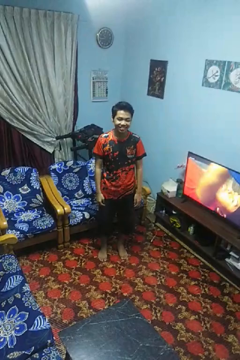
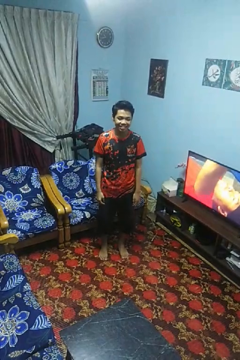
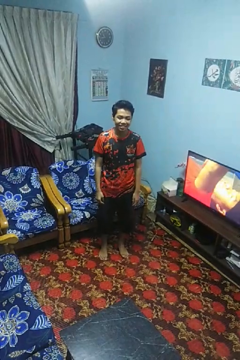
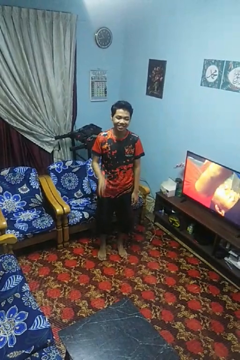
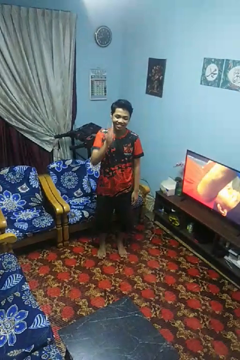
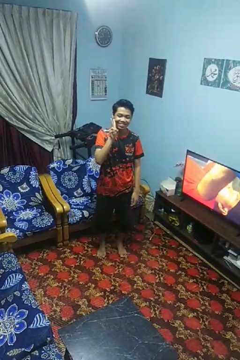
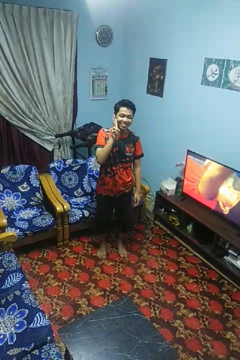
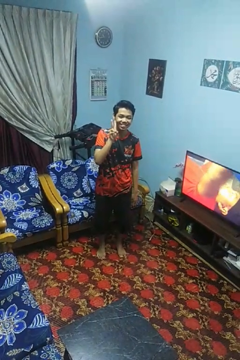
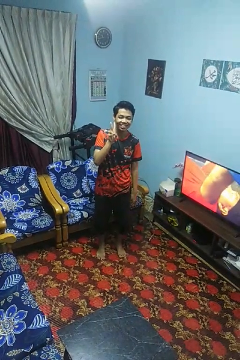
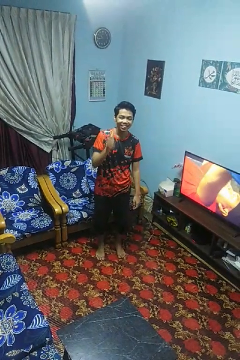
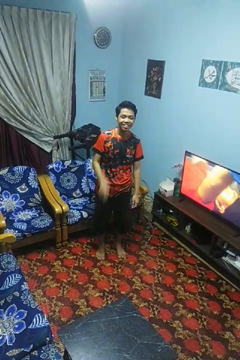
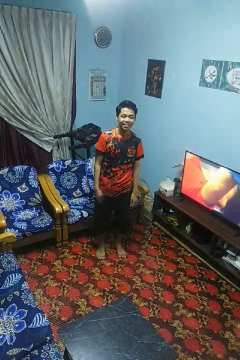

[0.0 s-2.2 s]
person gestures peace

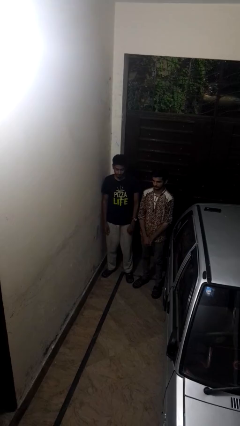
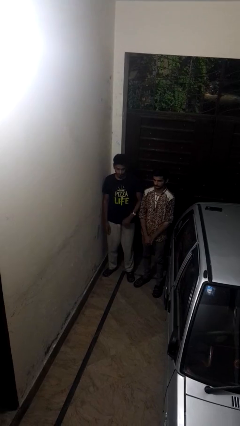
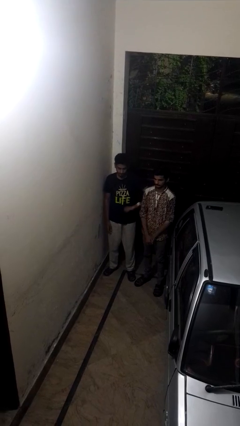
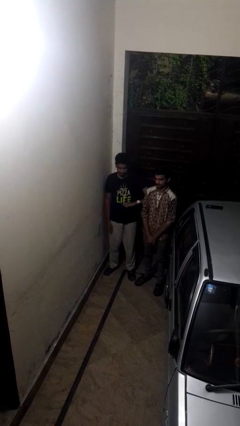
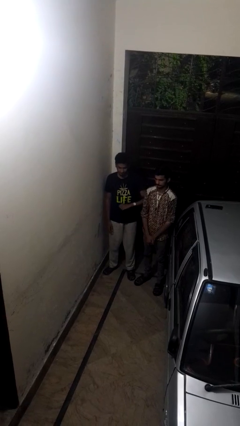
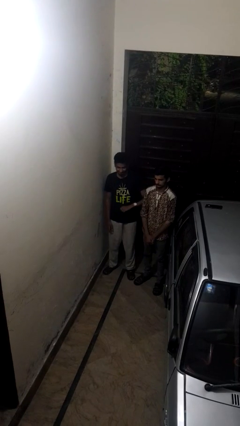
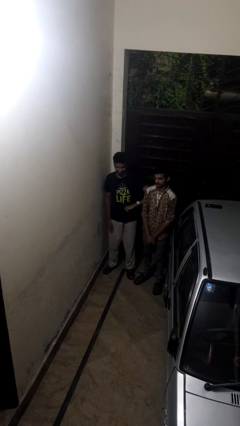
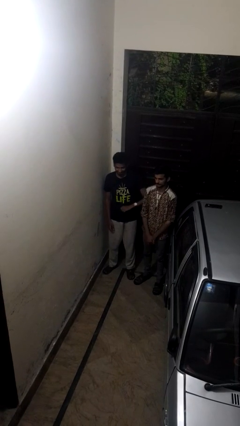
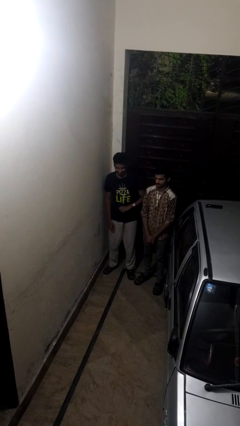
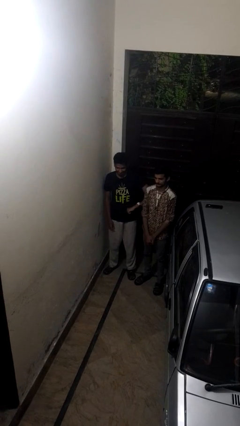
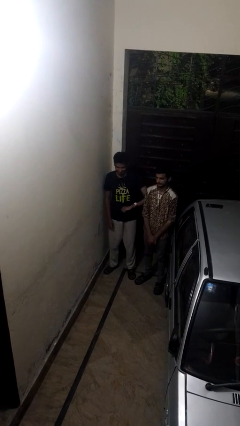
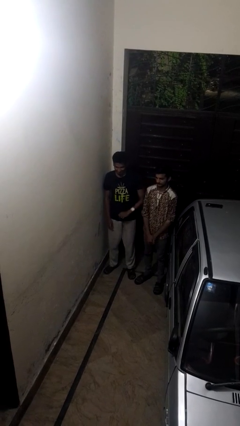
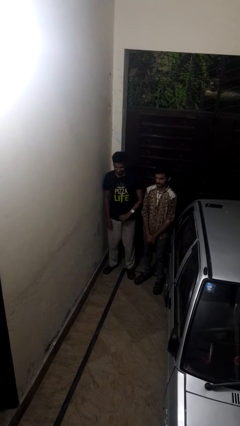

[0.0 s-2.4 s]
person nudges person with elbow

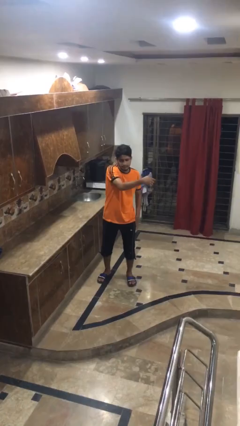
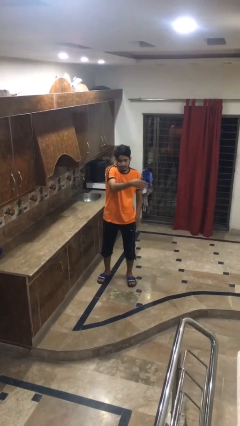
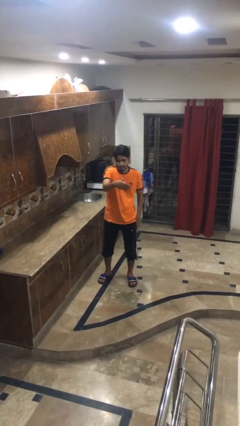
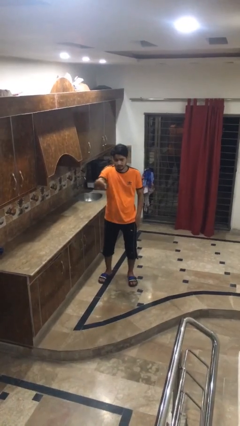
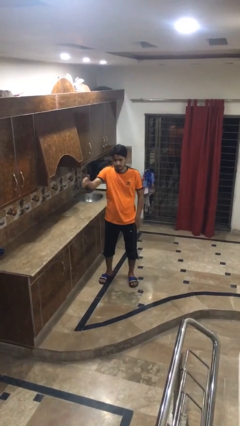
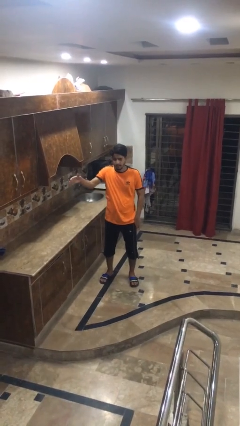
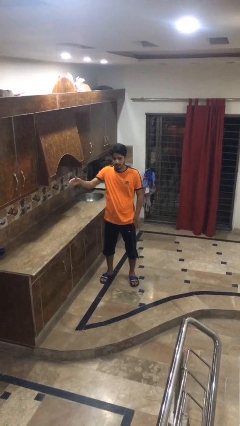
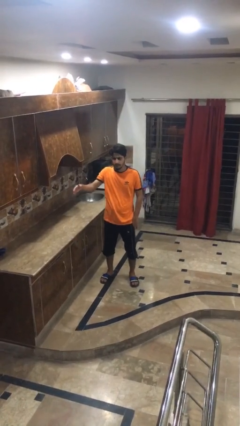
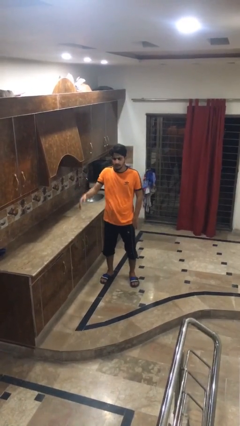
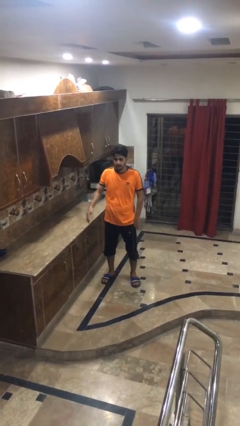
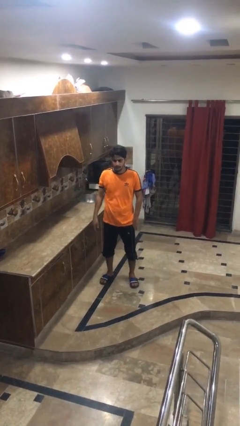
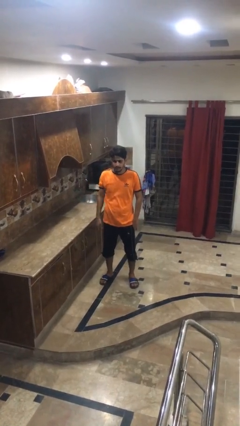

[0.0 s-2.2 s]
person gestures swipe right

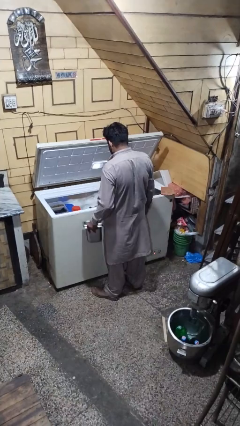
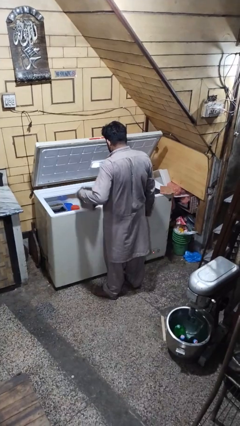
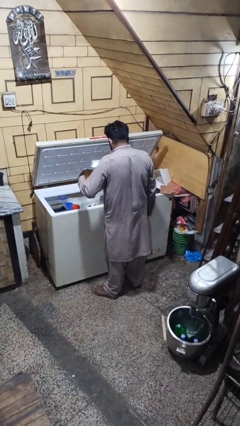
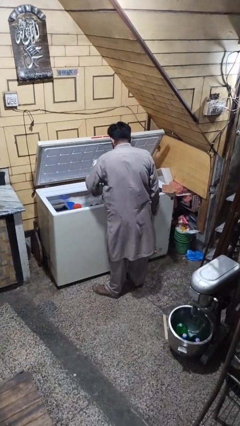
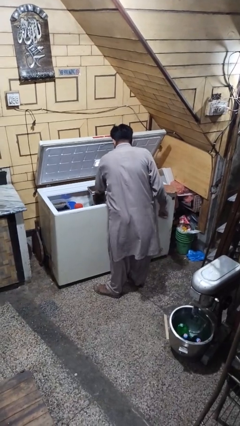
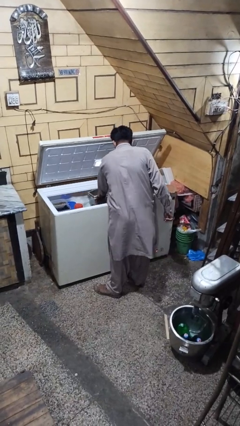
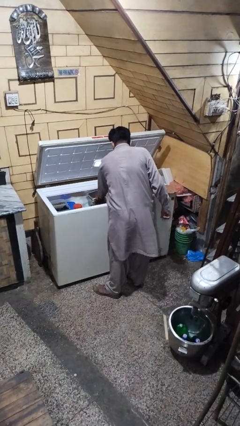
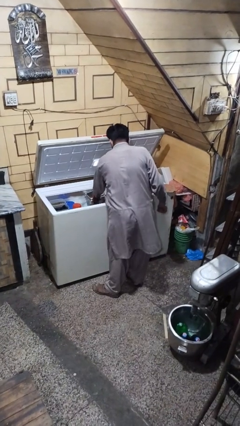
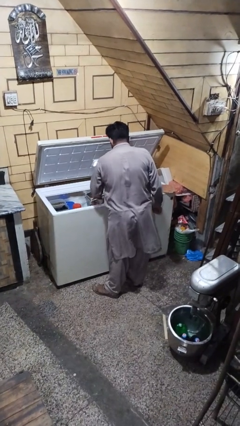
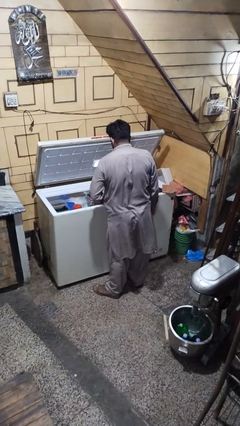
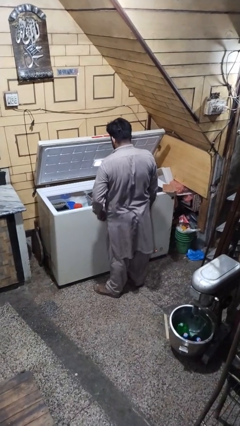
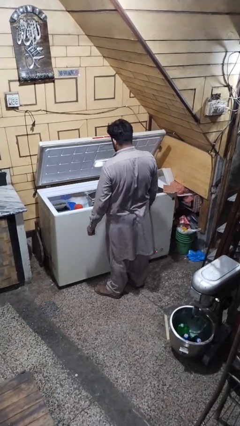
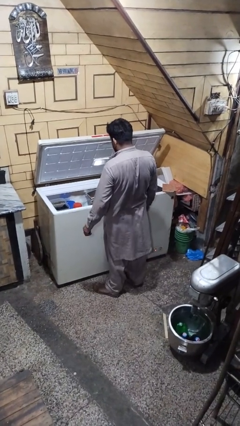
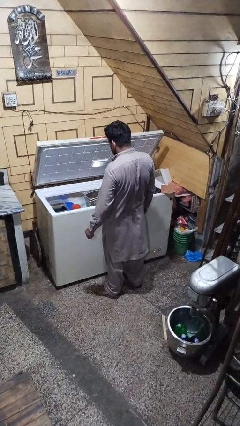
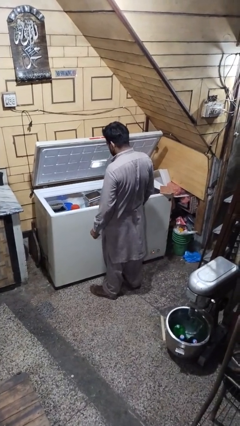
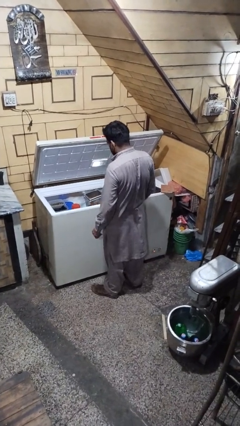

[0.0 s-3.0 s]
person puts object into refrigerator

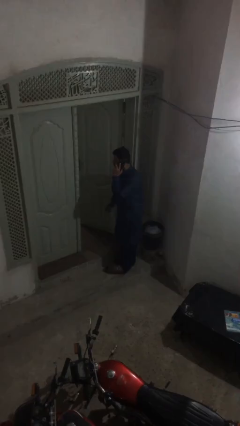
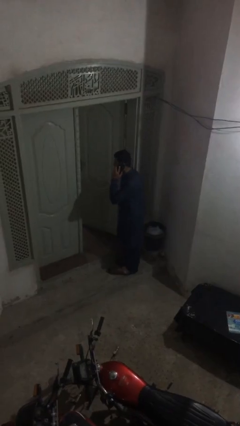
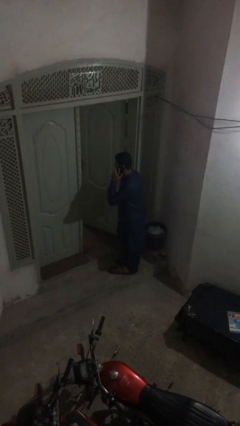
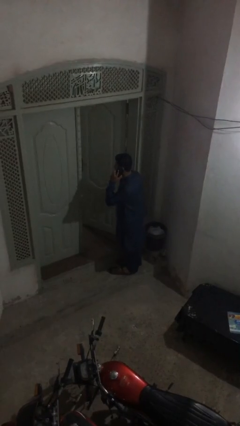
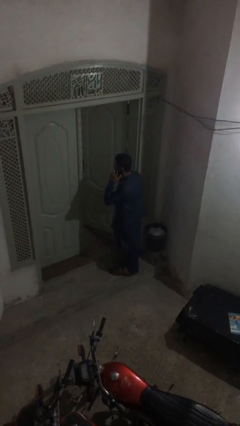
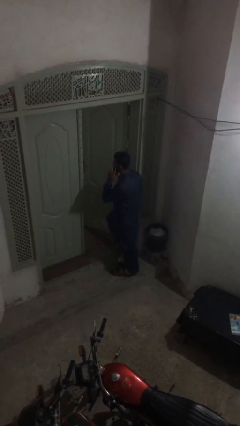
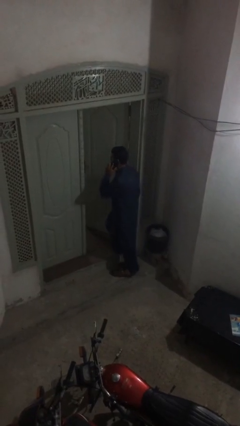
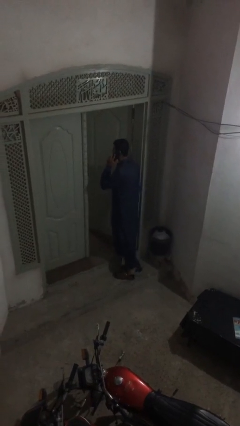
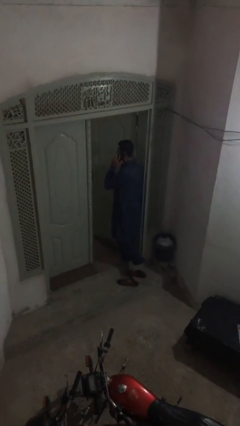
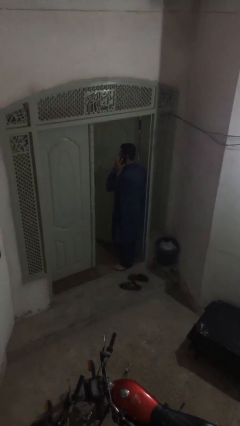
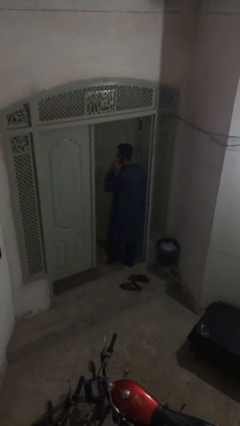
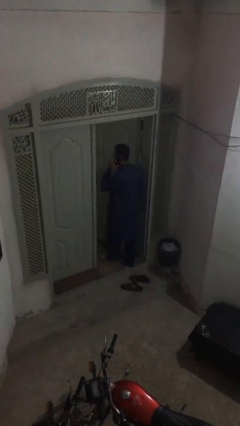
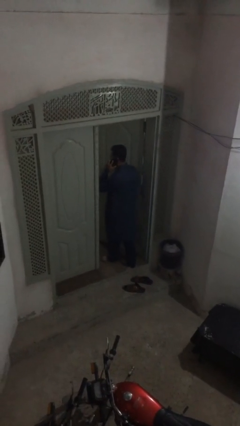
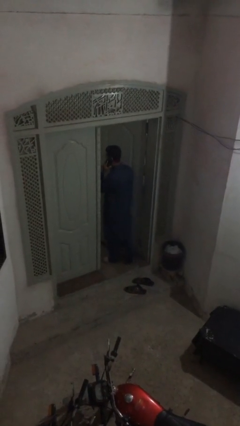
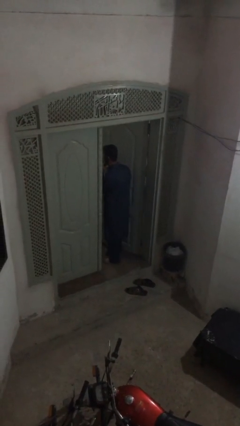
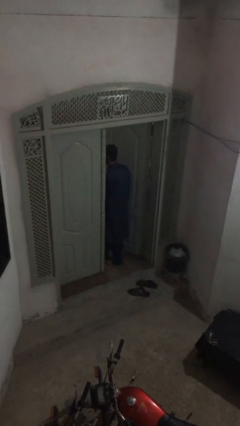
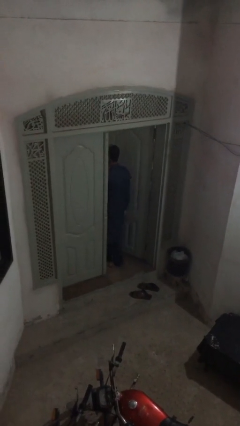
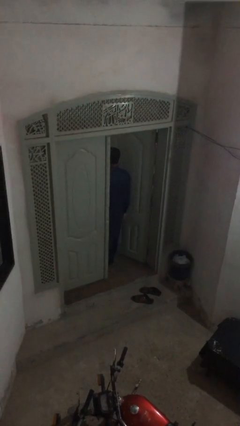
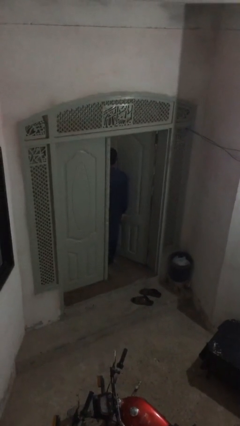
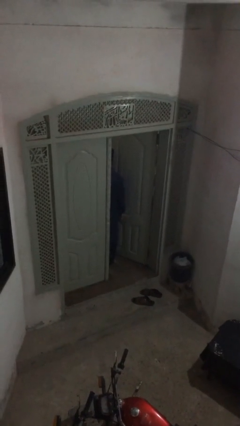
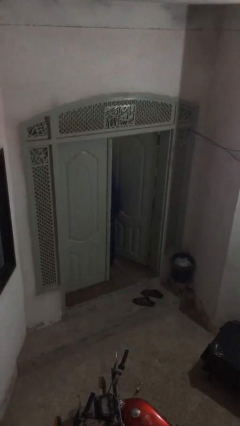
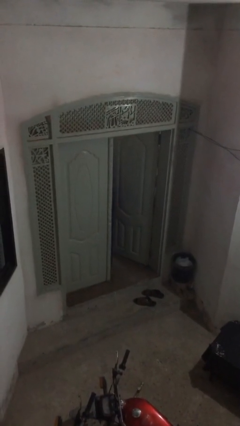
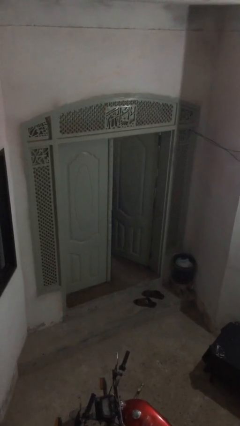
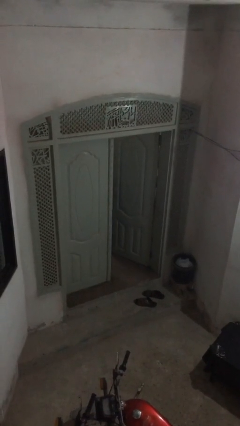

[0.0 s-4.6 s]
person exits scene through structure

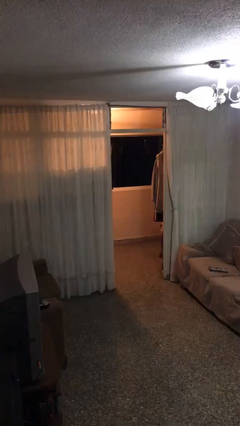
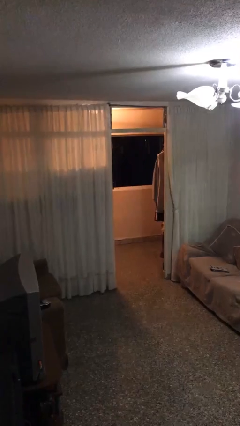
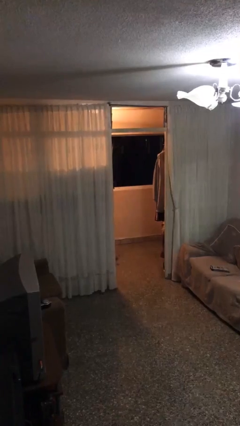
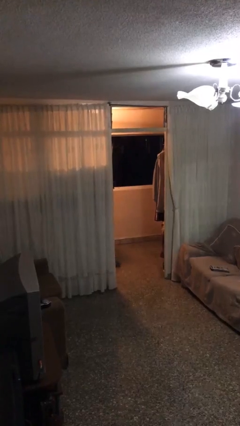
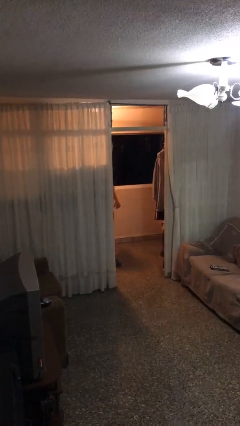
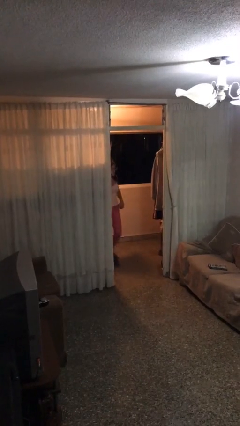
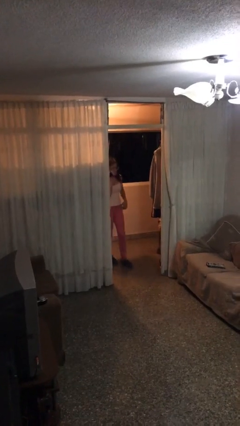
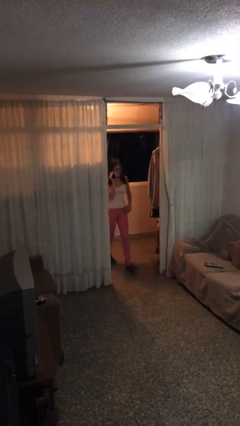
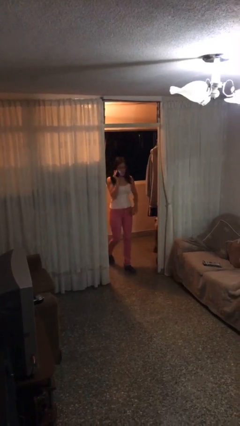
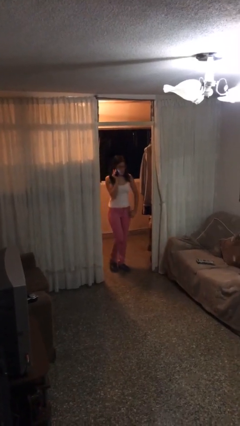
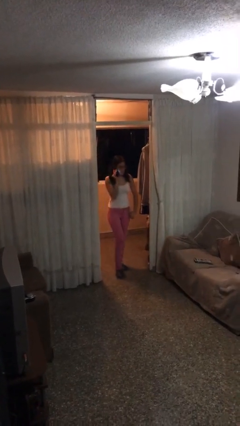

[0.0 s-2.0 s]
person enters scene through structure

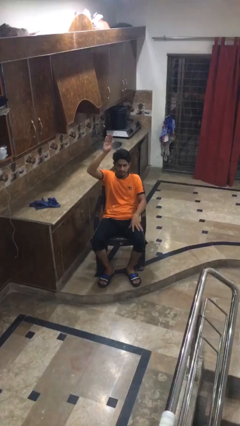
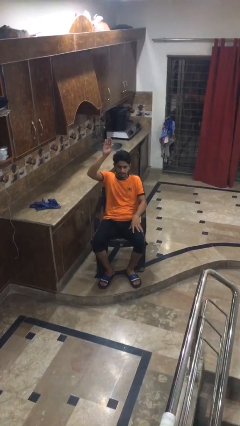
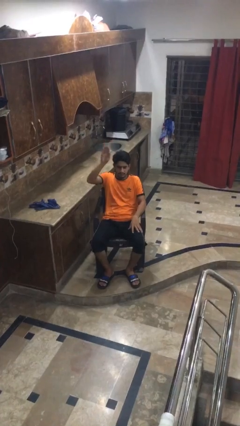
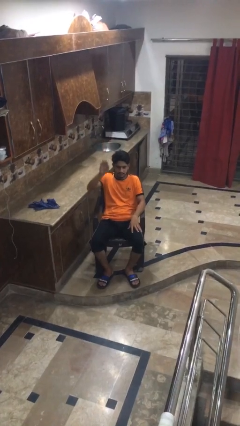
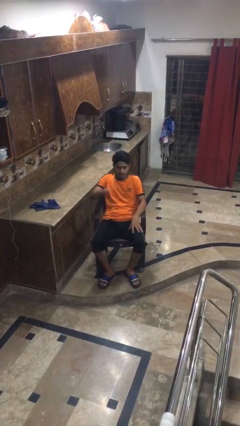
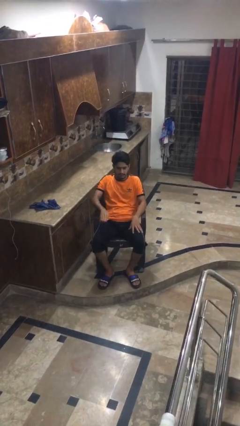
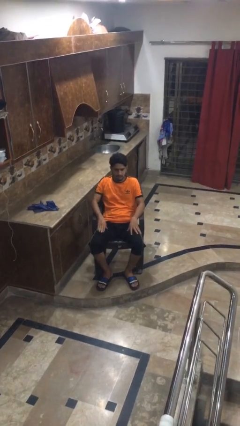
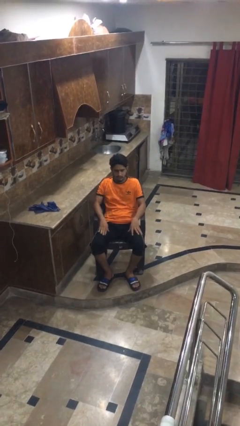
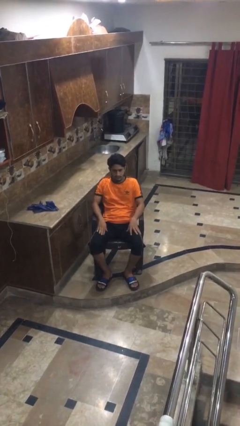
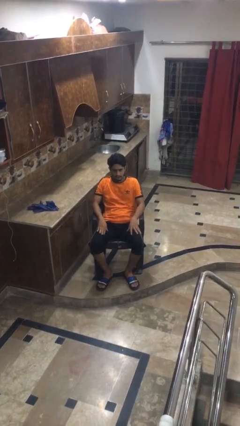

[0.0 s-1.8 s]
person gestures lower hand
